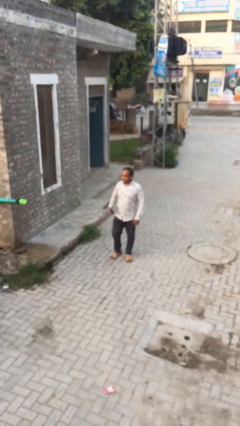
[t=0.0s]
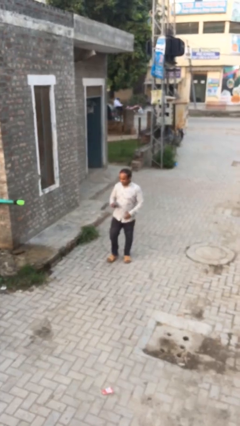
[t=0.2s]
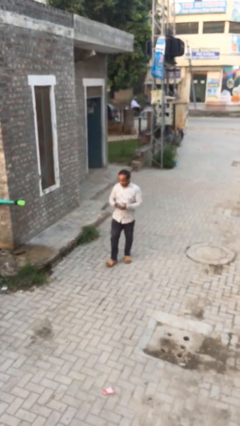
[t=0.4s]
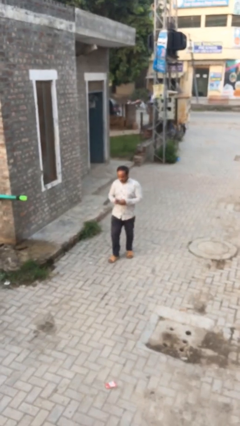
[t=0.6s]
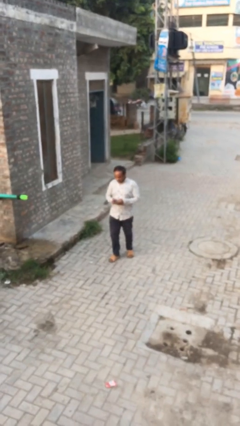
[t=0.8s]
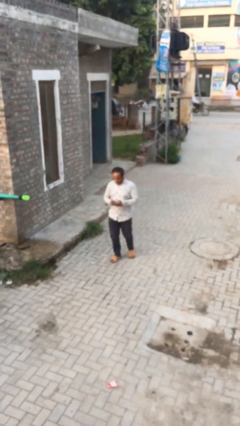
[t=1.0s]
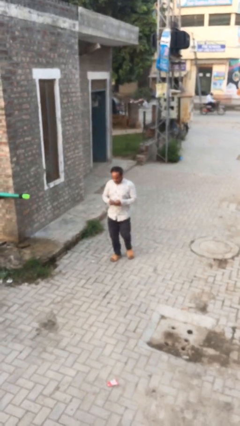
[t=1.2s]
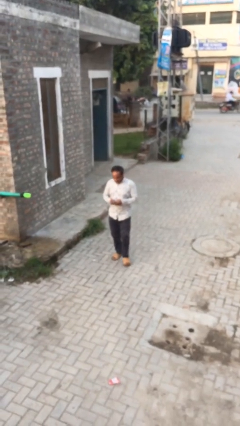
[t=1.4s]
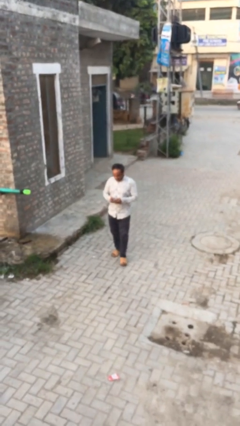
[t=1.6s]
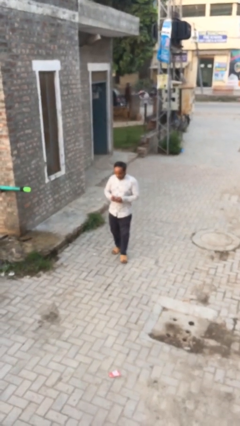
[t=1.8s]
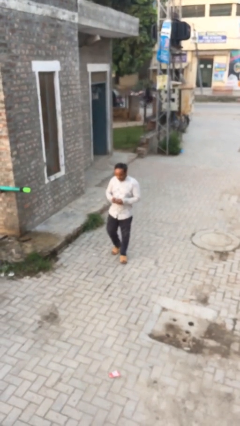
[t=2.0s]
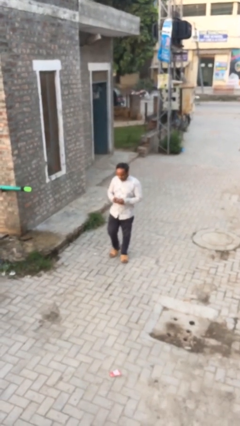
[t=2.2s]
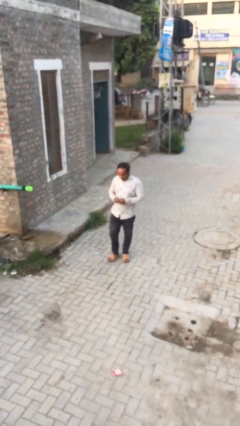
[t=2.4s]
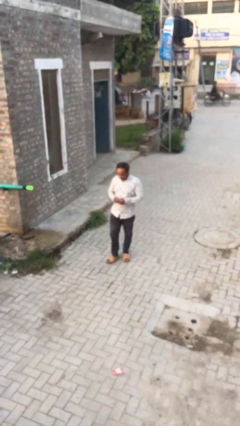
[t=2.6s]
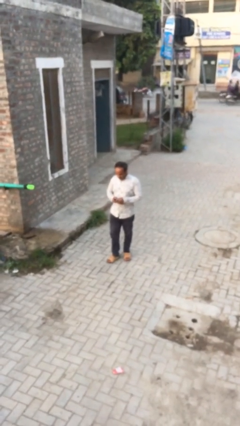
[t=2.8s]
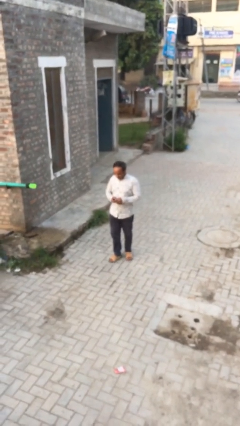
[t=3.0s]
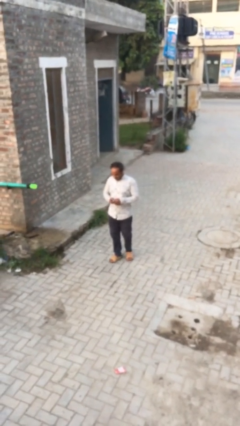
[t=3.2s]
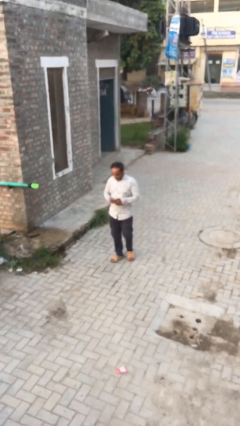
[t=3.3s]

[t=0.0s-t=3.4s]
person texts on phone

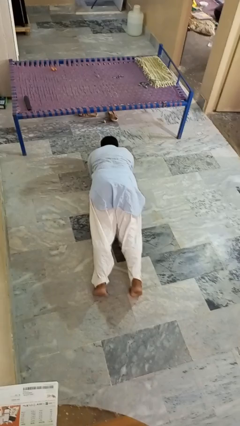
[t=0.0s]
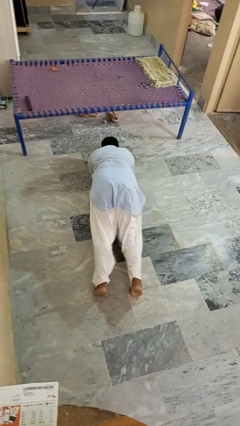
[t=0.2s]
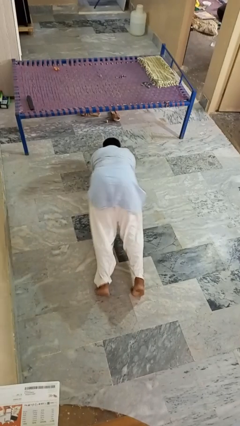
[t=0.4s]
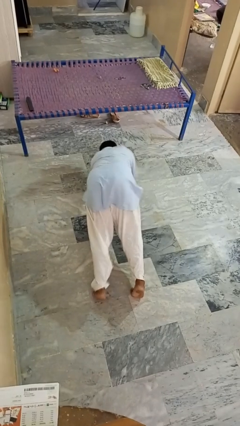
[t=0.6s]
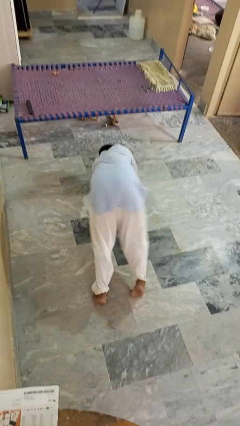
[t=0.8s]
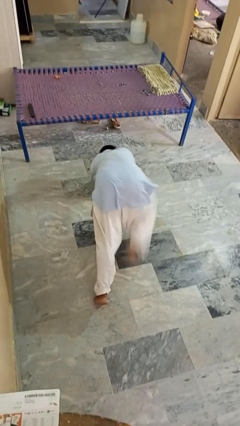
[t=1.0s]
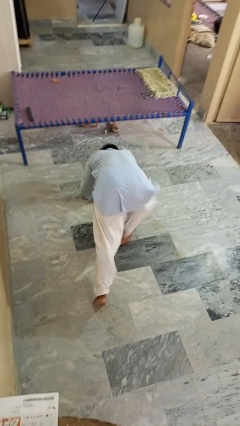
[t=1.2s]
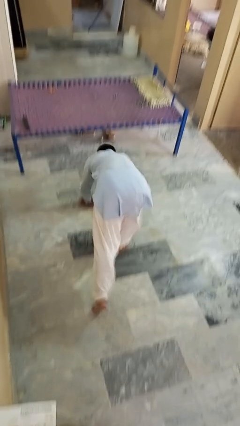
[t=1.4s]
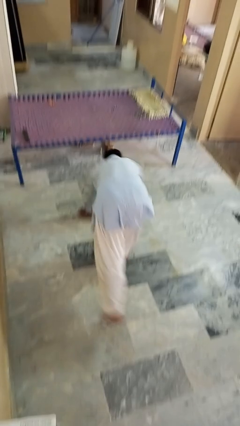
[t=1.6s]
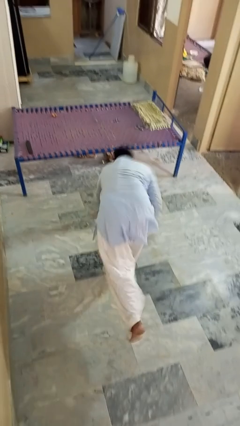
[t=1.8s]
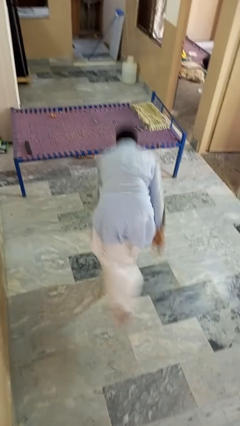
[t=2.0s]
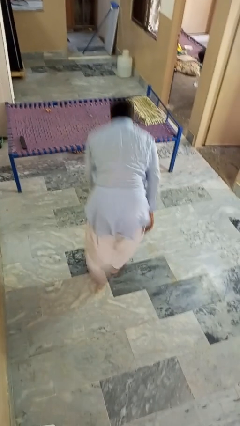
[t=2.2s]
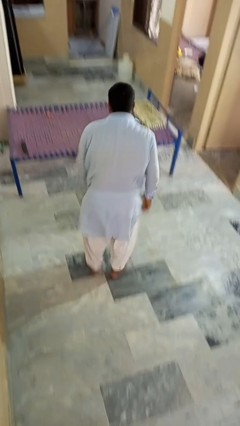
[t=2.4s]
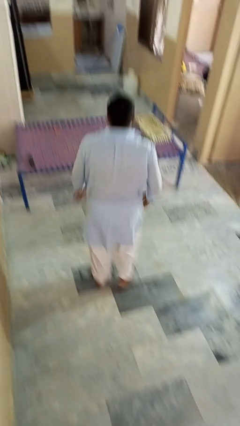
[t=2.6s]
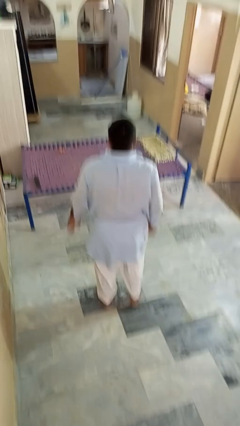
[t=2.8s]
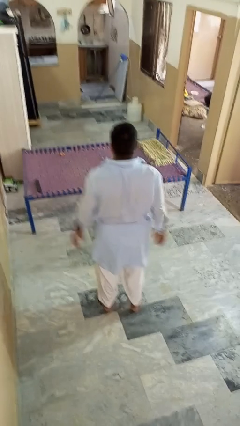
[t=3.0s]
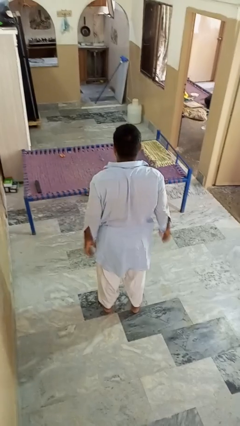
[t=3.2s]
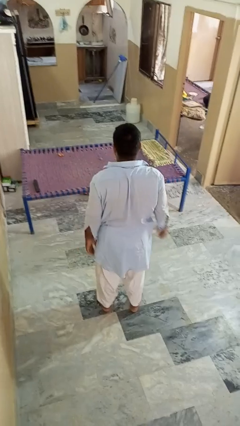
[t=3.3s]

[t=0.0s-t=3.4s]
person stands up from floor

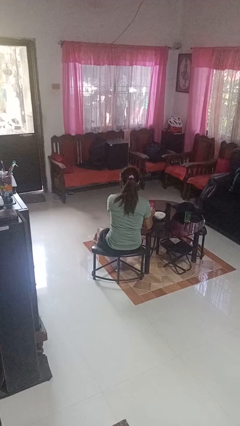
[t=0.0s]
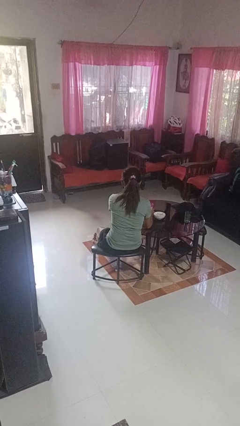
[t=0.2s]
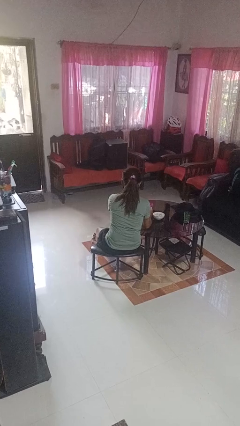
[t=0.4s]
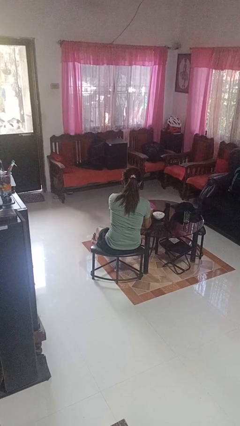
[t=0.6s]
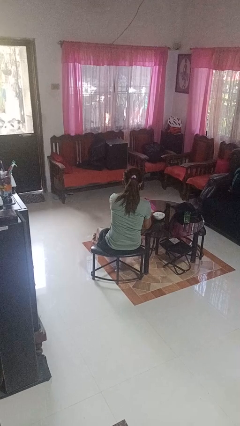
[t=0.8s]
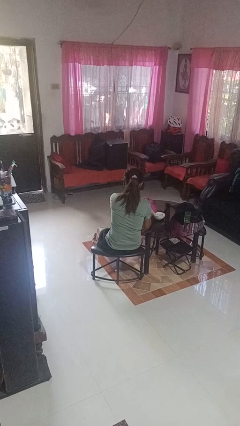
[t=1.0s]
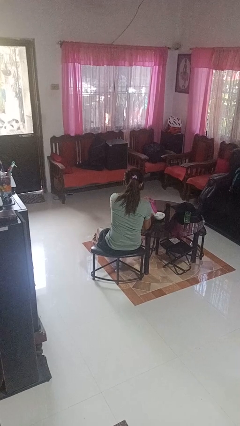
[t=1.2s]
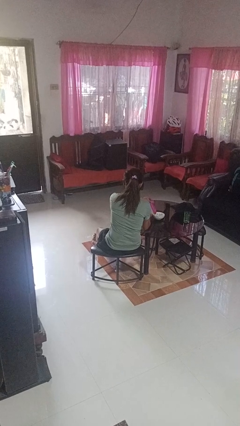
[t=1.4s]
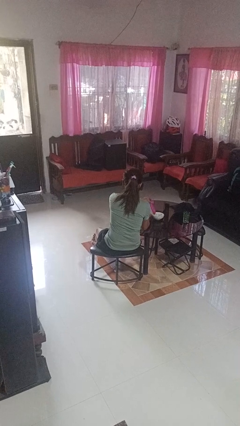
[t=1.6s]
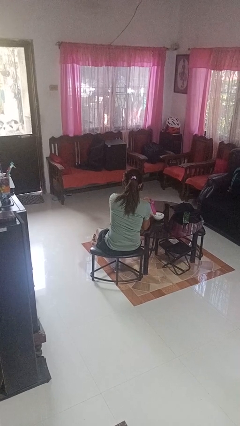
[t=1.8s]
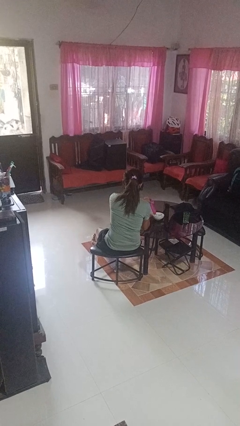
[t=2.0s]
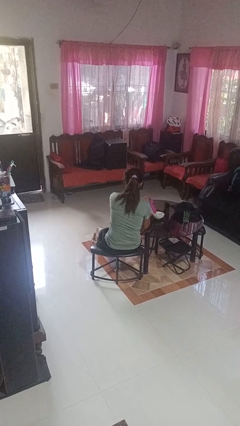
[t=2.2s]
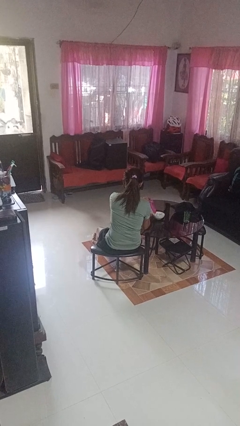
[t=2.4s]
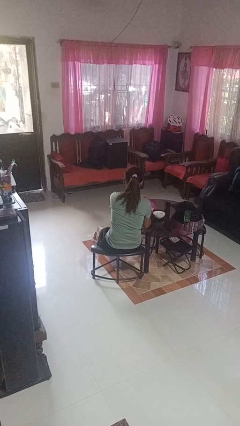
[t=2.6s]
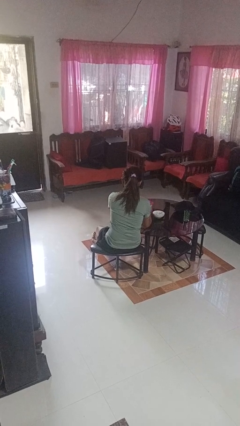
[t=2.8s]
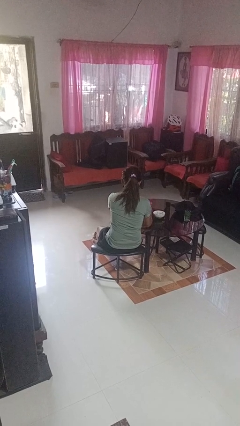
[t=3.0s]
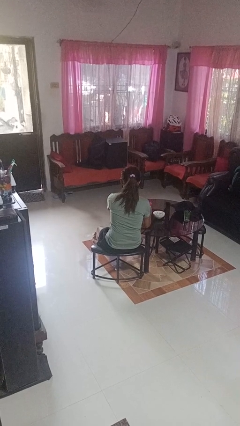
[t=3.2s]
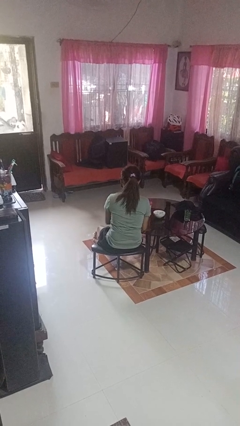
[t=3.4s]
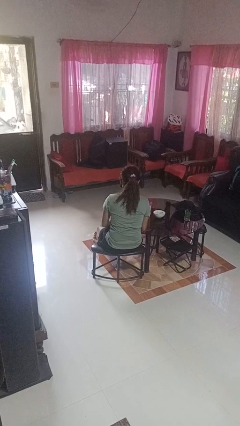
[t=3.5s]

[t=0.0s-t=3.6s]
person pours into bowl

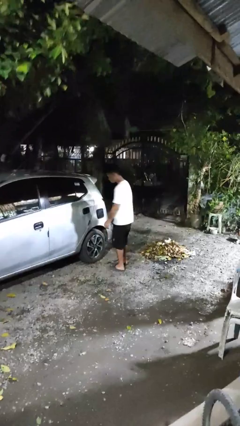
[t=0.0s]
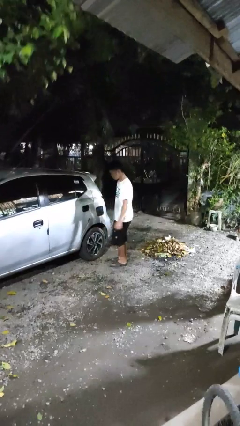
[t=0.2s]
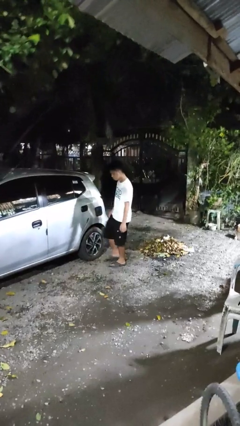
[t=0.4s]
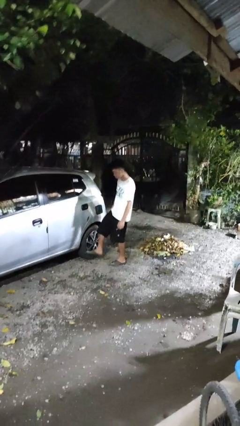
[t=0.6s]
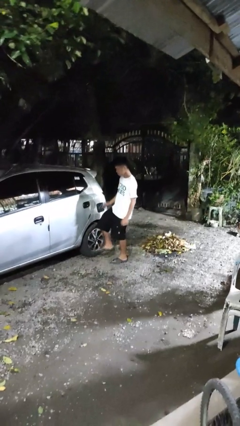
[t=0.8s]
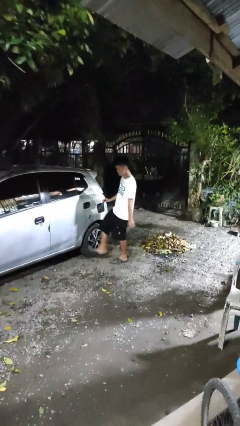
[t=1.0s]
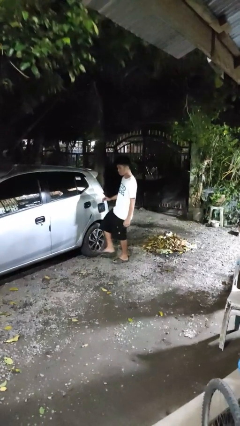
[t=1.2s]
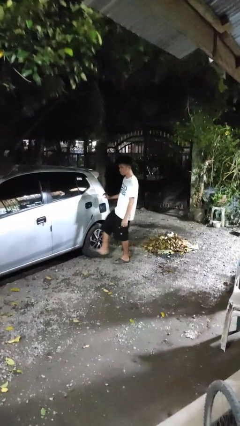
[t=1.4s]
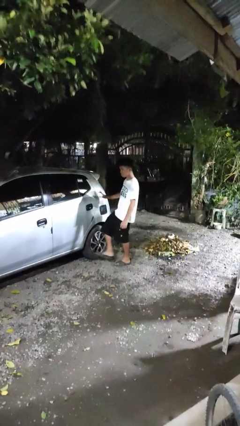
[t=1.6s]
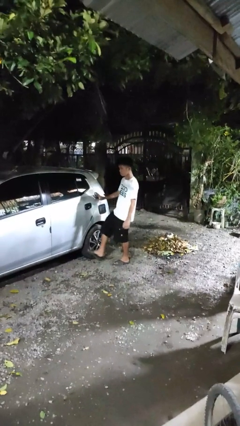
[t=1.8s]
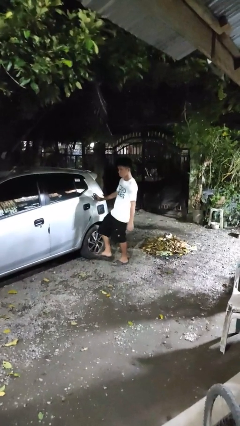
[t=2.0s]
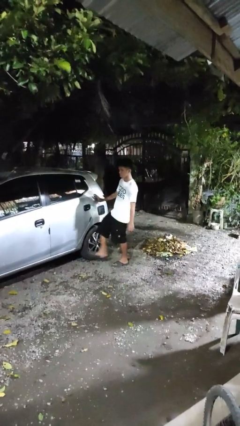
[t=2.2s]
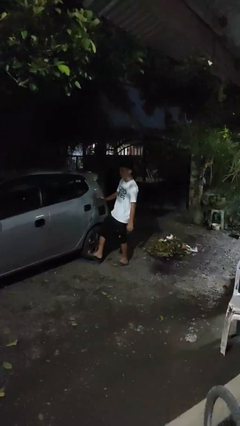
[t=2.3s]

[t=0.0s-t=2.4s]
person kicks car tires

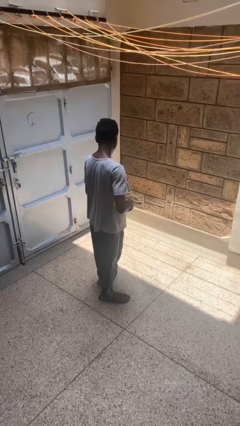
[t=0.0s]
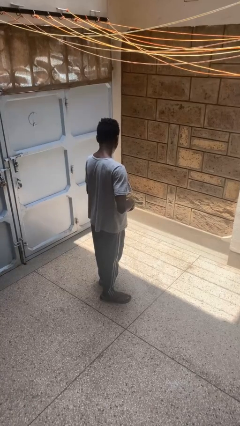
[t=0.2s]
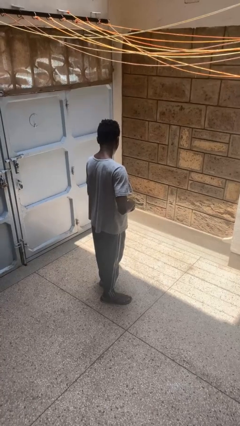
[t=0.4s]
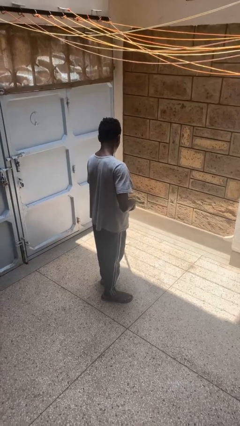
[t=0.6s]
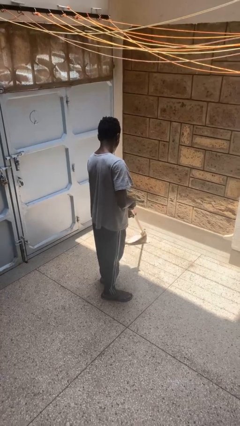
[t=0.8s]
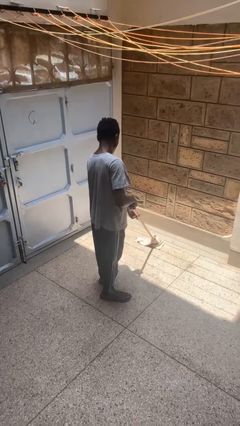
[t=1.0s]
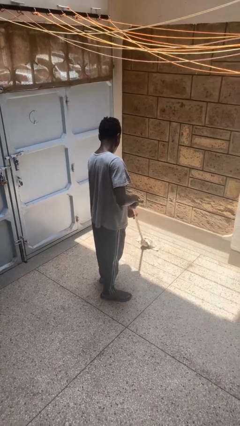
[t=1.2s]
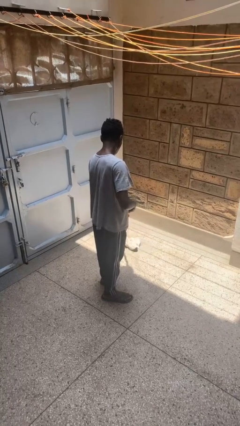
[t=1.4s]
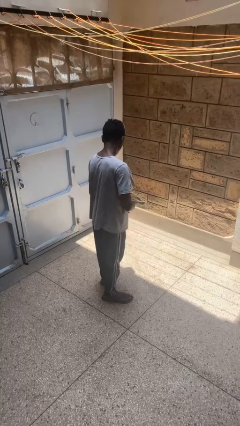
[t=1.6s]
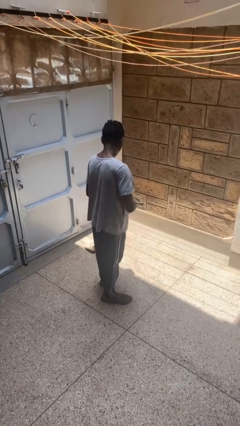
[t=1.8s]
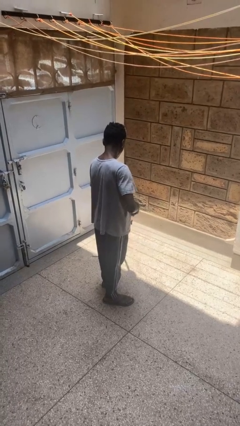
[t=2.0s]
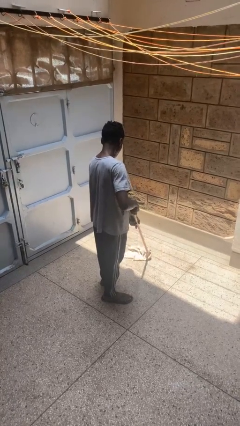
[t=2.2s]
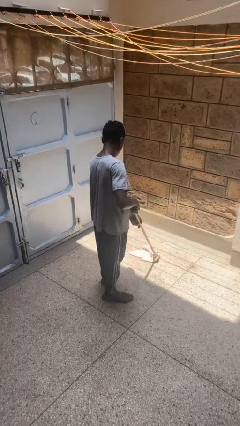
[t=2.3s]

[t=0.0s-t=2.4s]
person mops

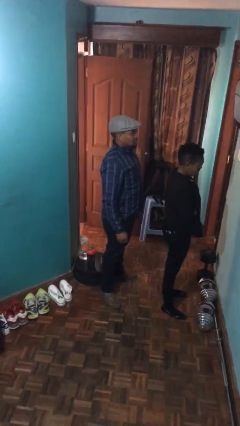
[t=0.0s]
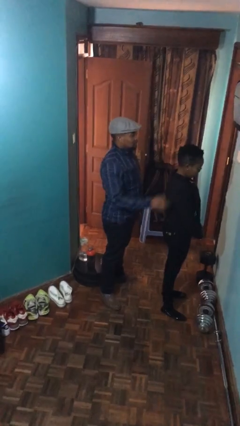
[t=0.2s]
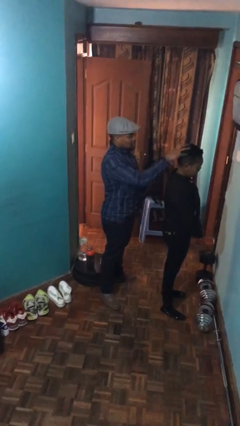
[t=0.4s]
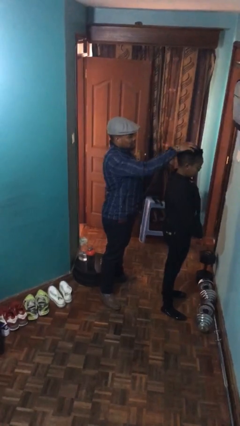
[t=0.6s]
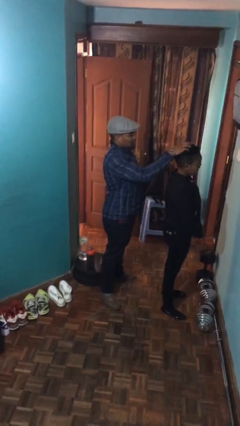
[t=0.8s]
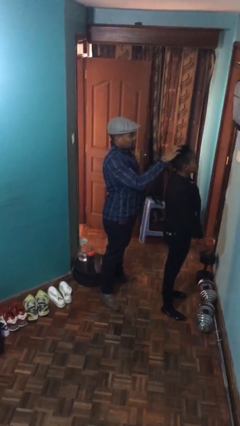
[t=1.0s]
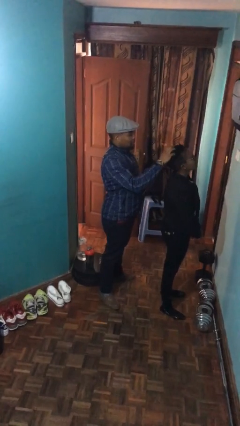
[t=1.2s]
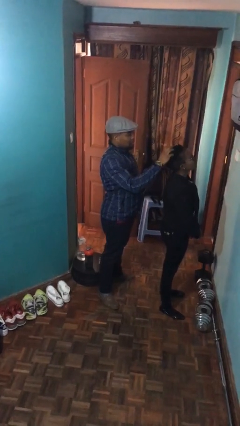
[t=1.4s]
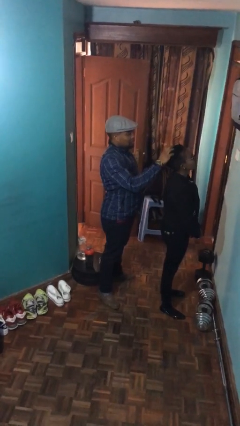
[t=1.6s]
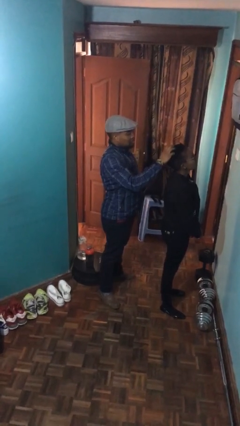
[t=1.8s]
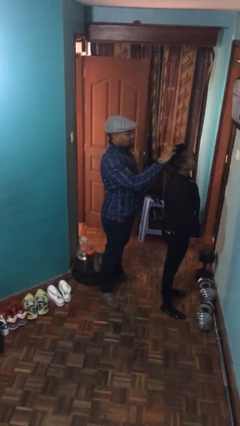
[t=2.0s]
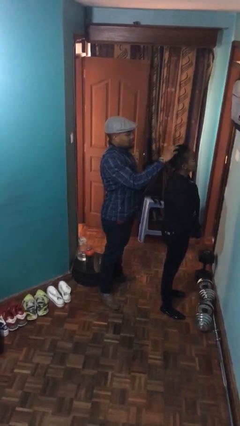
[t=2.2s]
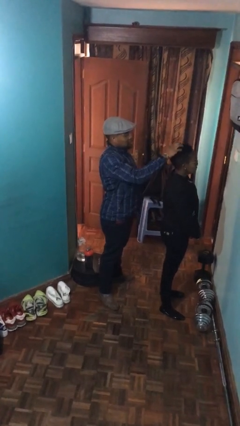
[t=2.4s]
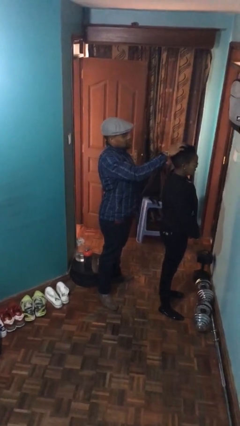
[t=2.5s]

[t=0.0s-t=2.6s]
person grabs person by hair
